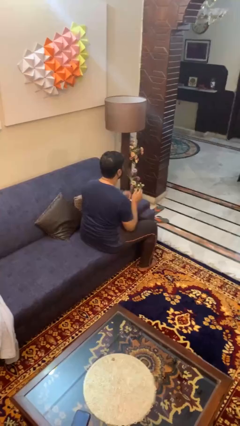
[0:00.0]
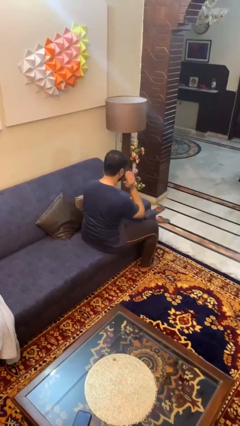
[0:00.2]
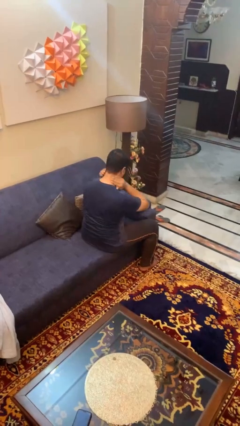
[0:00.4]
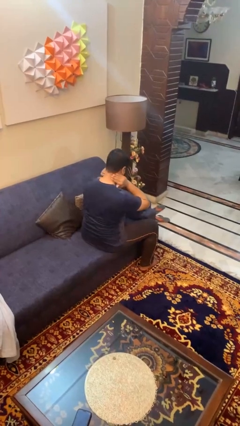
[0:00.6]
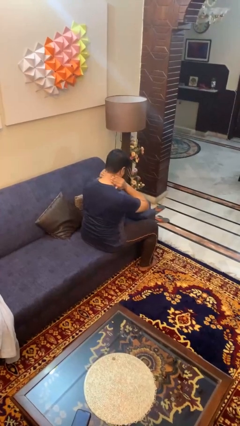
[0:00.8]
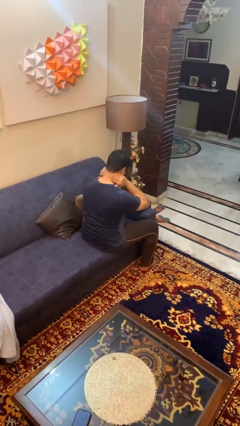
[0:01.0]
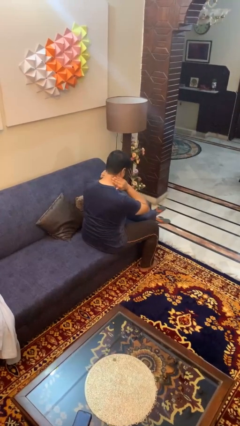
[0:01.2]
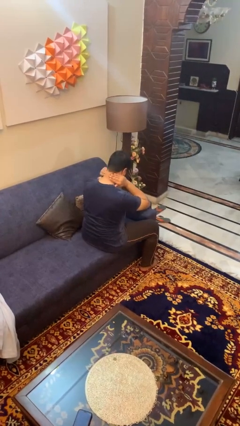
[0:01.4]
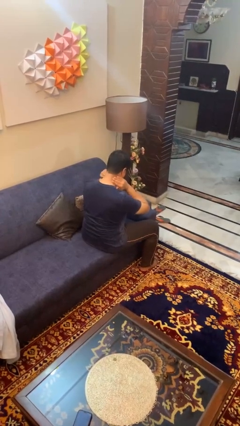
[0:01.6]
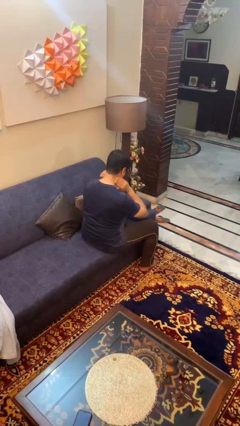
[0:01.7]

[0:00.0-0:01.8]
person rubs neck

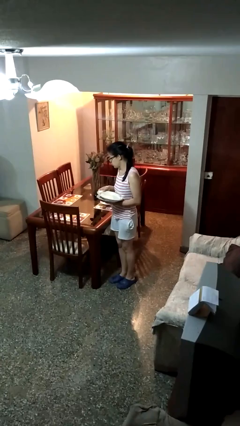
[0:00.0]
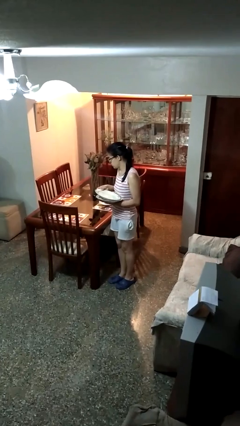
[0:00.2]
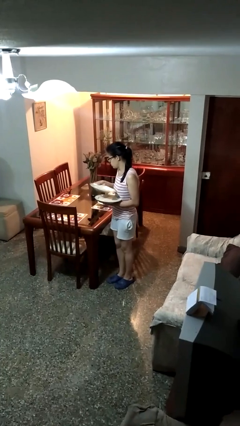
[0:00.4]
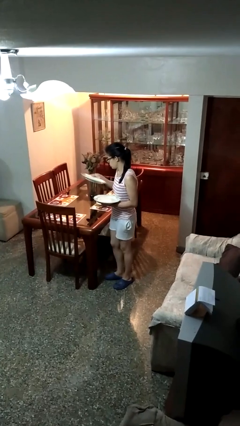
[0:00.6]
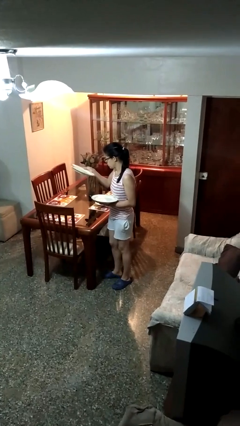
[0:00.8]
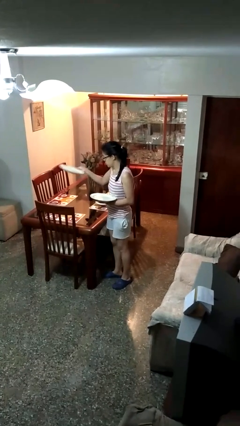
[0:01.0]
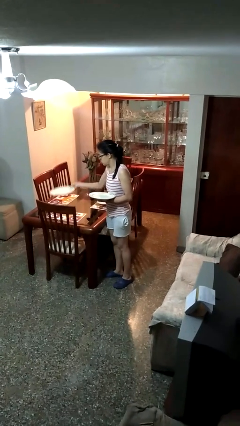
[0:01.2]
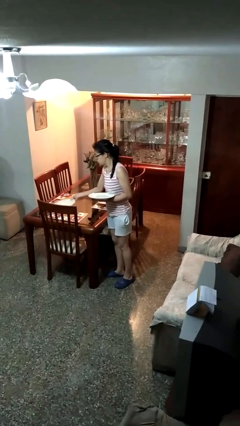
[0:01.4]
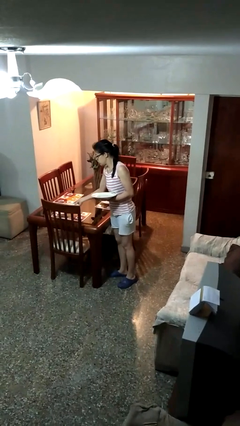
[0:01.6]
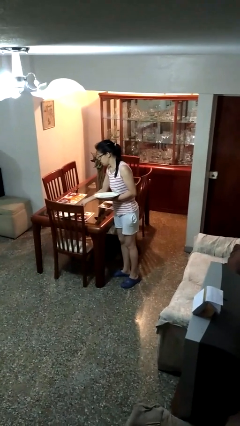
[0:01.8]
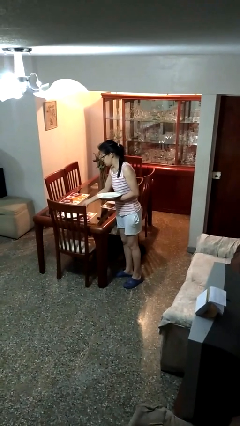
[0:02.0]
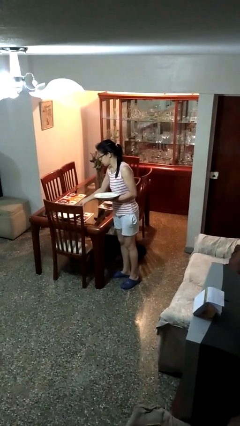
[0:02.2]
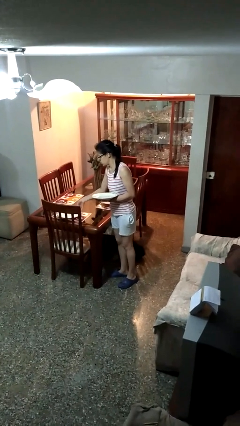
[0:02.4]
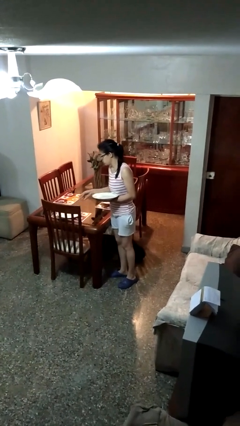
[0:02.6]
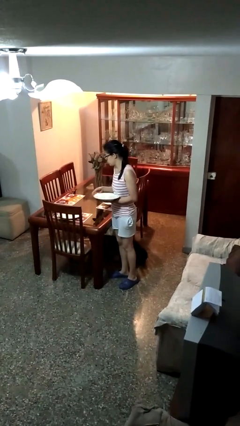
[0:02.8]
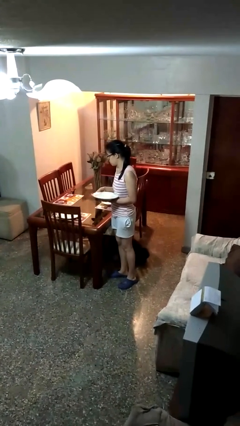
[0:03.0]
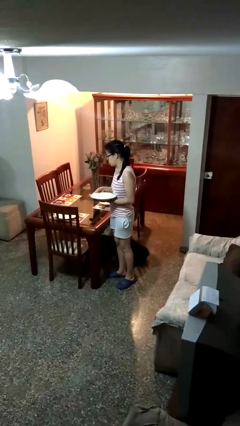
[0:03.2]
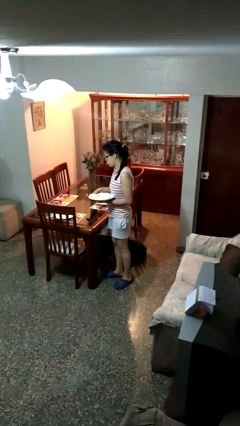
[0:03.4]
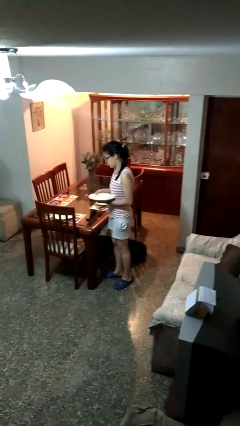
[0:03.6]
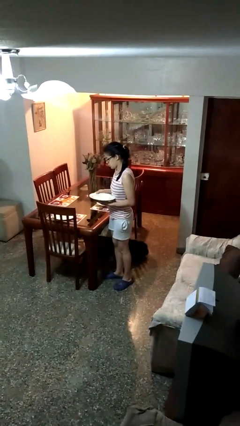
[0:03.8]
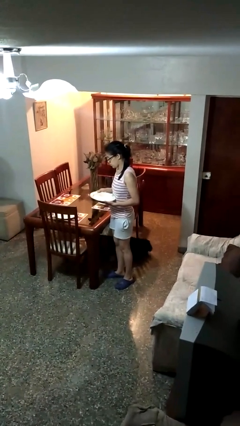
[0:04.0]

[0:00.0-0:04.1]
person sets table

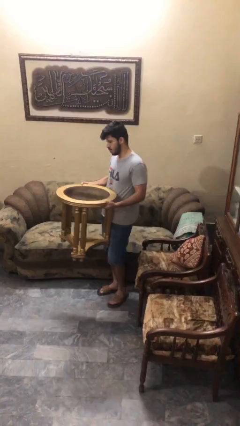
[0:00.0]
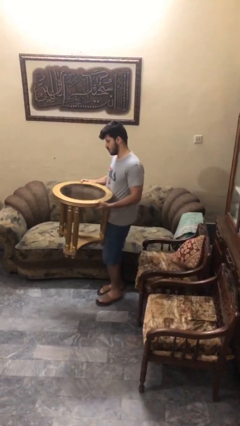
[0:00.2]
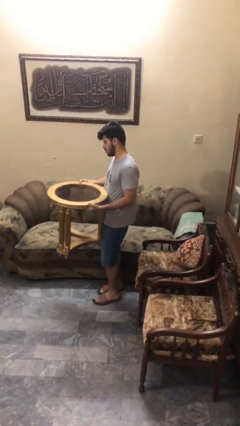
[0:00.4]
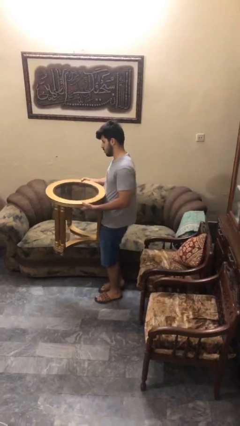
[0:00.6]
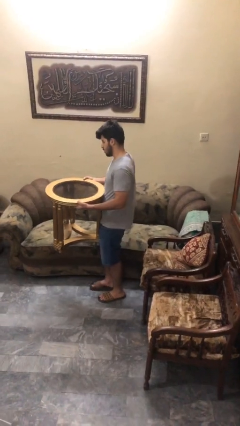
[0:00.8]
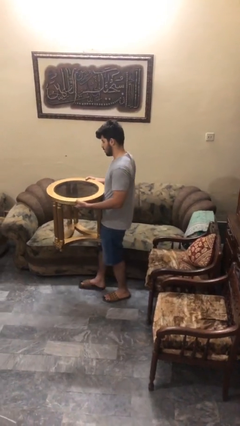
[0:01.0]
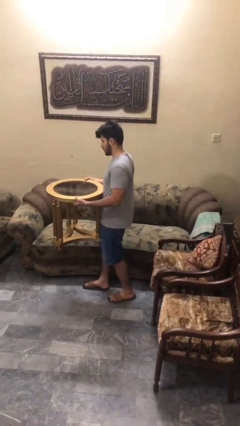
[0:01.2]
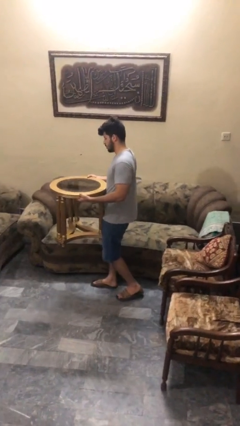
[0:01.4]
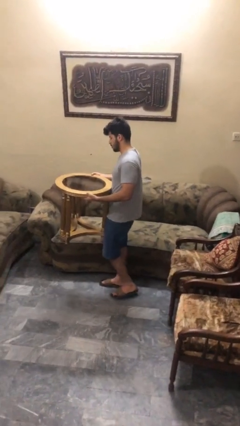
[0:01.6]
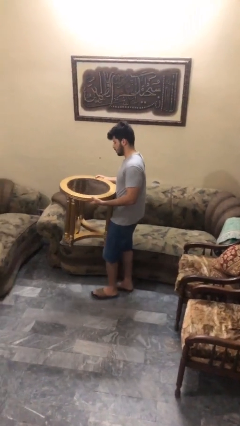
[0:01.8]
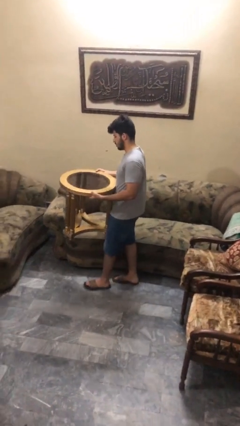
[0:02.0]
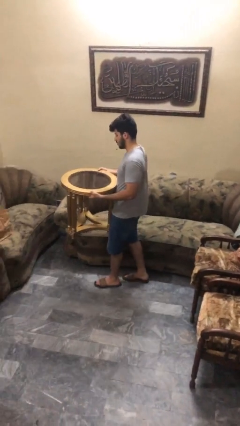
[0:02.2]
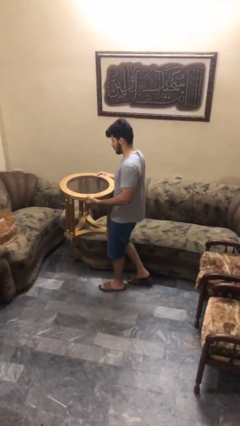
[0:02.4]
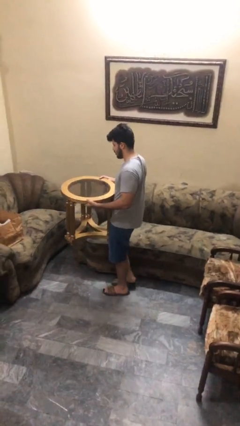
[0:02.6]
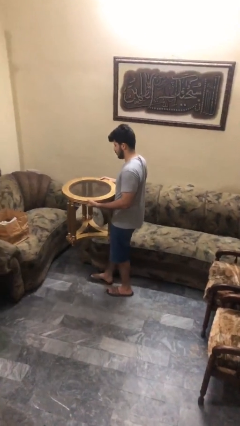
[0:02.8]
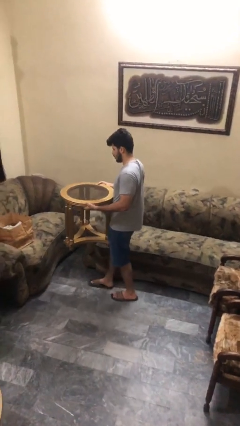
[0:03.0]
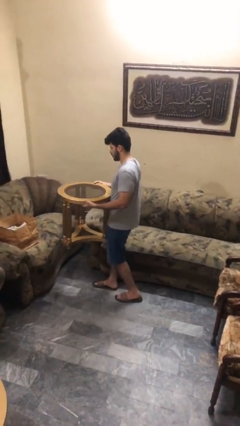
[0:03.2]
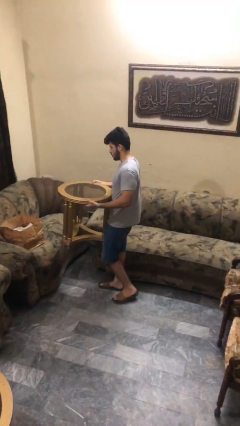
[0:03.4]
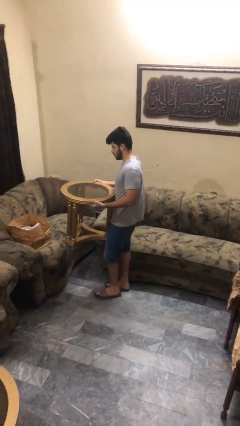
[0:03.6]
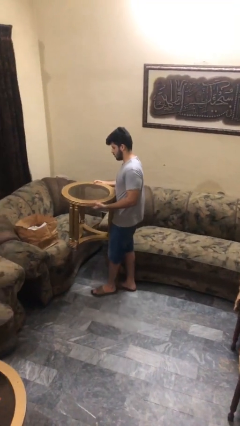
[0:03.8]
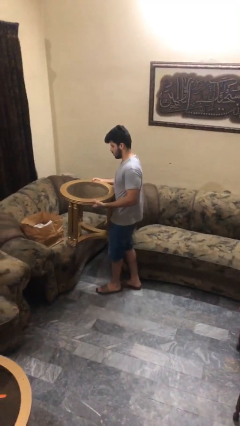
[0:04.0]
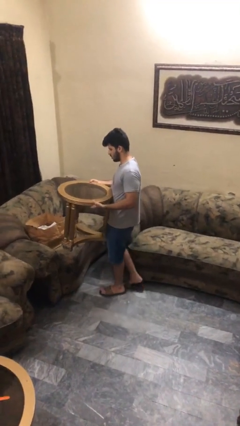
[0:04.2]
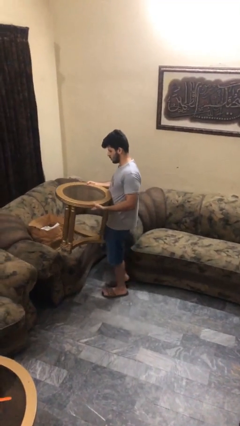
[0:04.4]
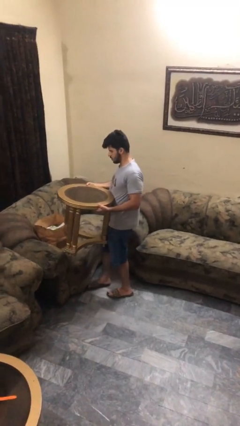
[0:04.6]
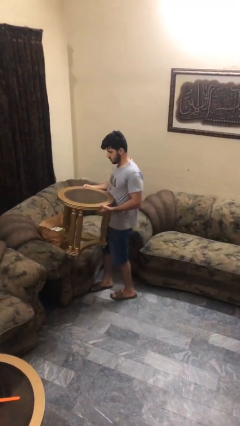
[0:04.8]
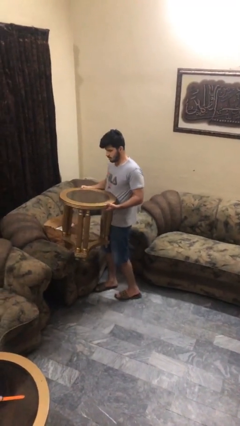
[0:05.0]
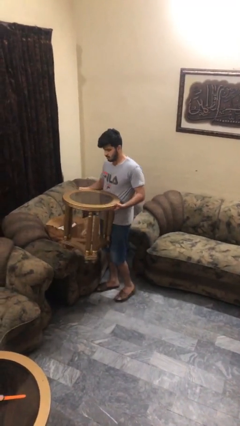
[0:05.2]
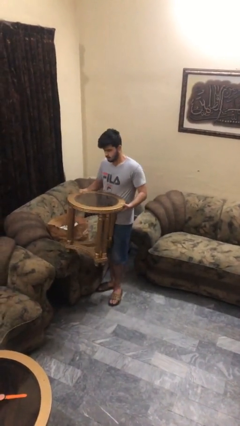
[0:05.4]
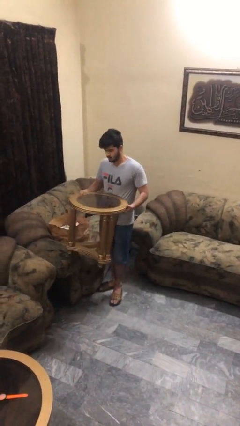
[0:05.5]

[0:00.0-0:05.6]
person carries furniture

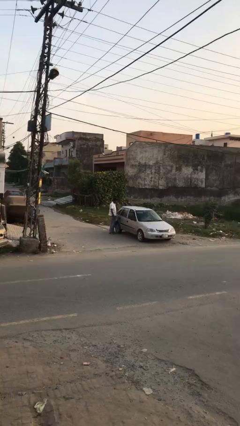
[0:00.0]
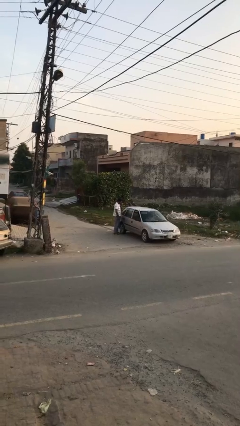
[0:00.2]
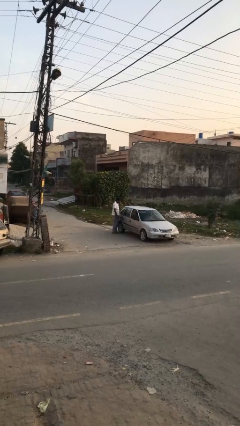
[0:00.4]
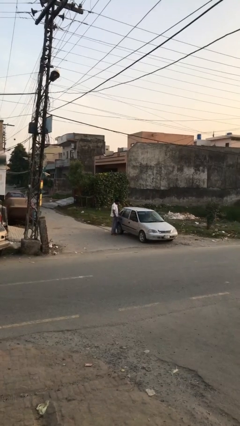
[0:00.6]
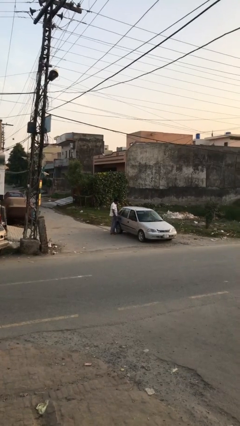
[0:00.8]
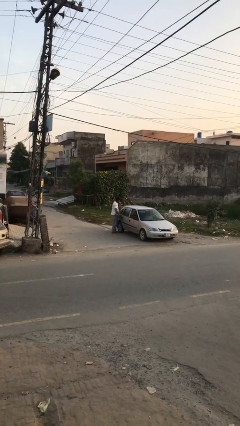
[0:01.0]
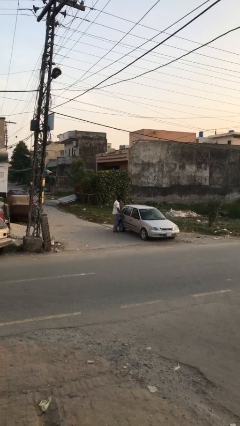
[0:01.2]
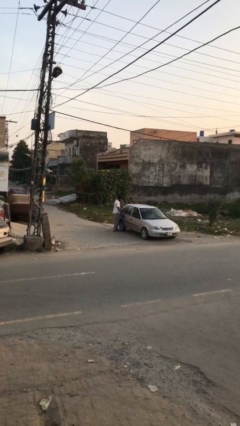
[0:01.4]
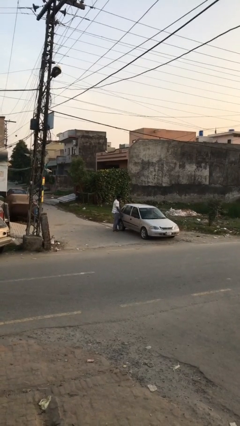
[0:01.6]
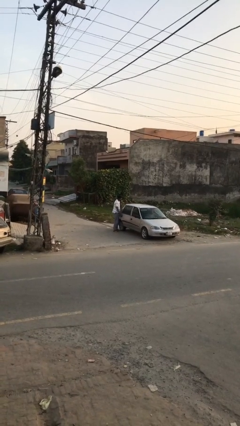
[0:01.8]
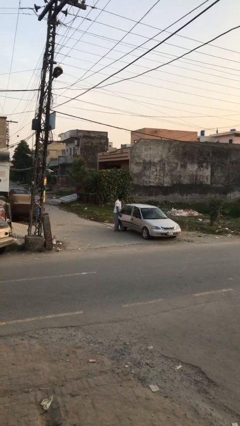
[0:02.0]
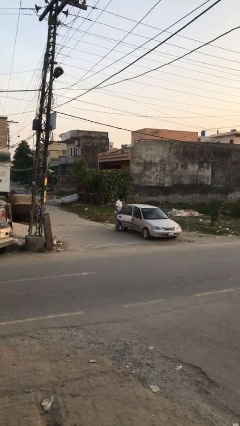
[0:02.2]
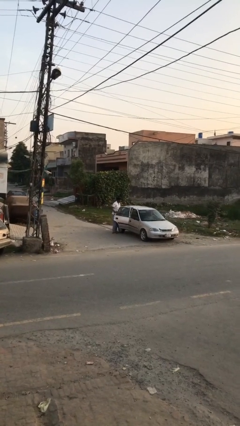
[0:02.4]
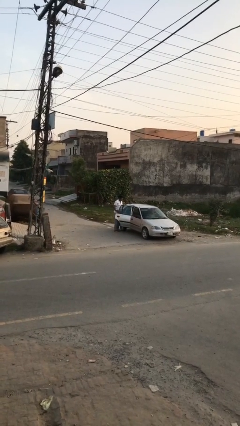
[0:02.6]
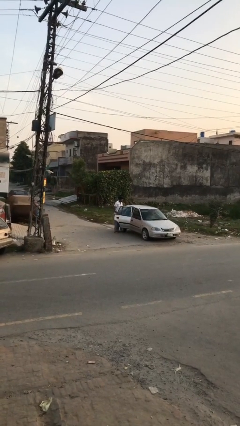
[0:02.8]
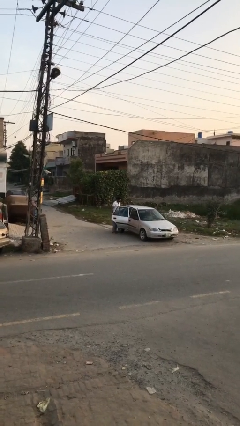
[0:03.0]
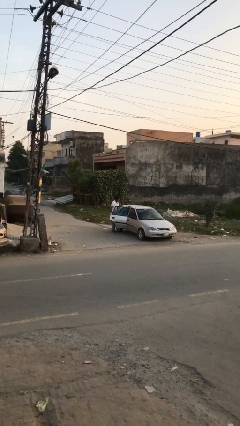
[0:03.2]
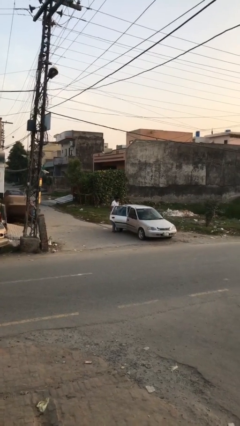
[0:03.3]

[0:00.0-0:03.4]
person opens car door

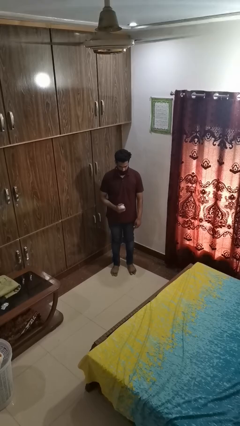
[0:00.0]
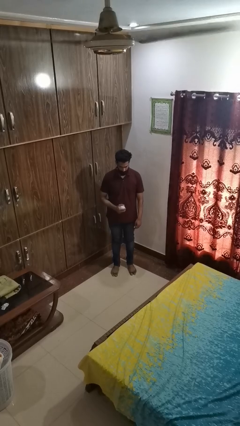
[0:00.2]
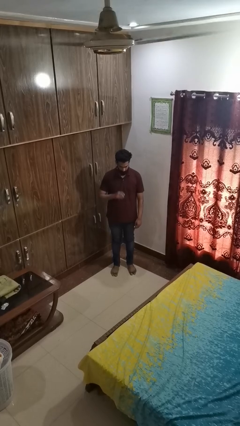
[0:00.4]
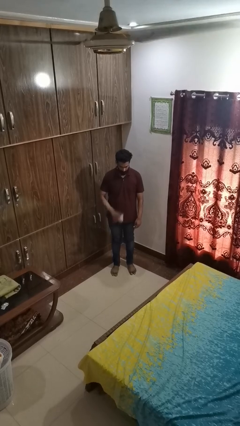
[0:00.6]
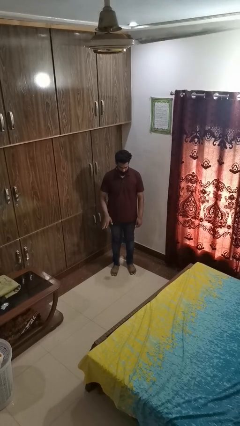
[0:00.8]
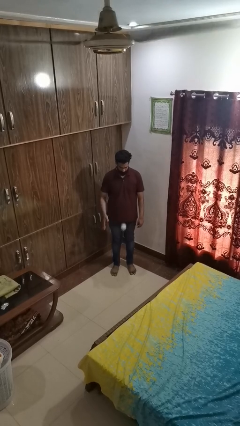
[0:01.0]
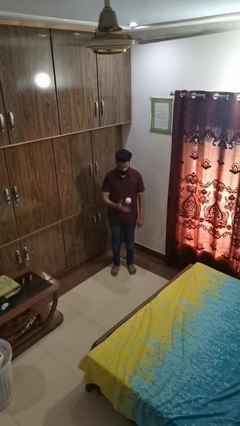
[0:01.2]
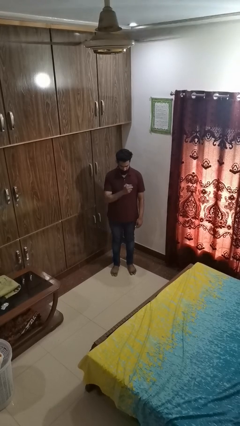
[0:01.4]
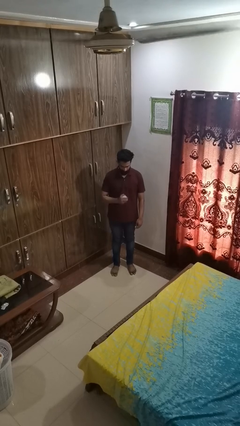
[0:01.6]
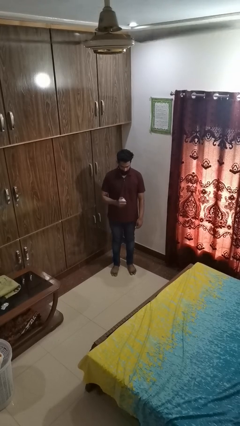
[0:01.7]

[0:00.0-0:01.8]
person bounces ball on floor

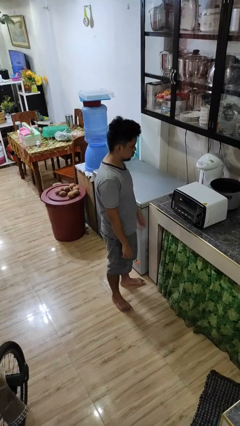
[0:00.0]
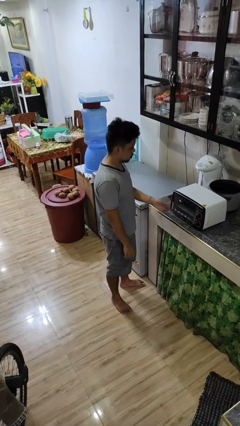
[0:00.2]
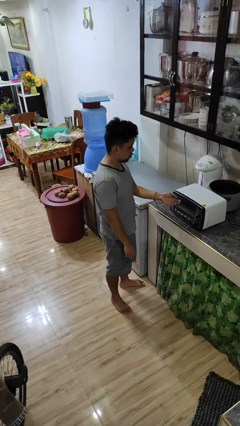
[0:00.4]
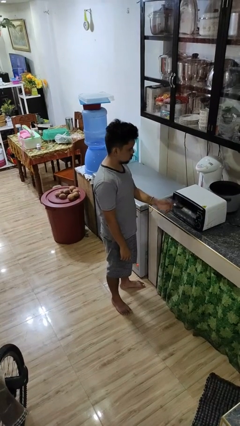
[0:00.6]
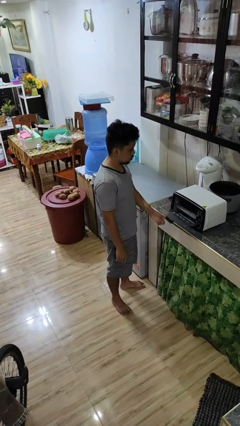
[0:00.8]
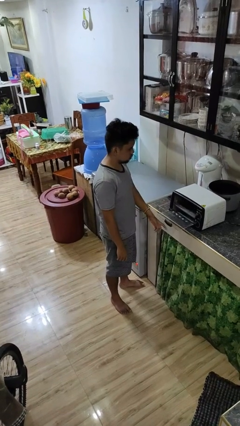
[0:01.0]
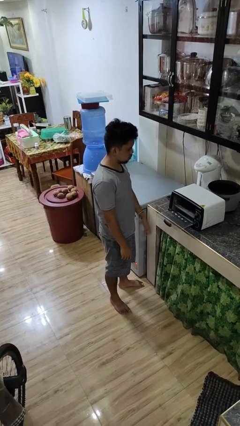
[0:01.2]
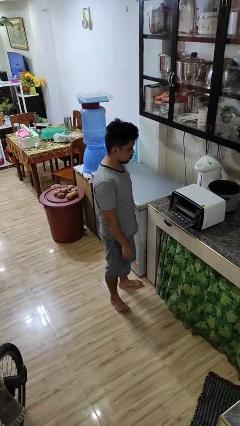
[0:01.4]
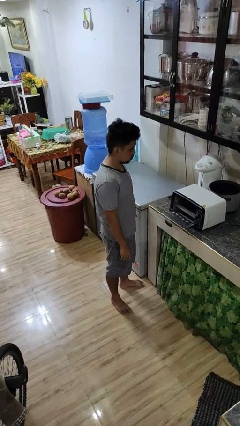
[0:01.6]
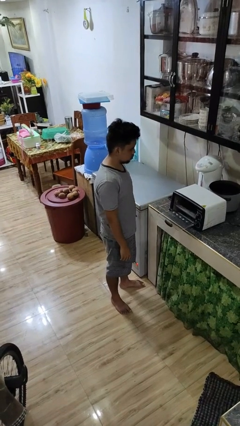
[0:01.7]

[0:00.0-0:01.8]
person opens microwave
